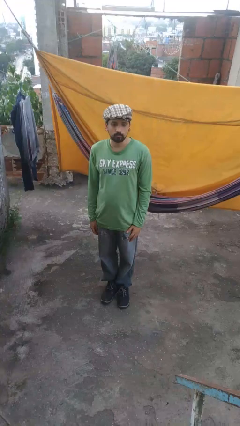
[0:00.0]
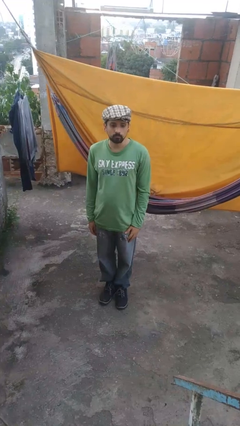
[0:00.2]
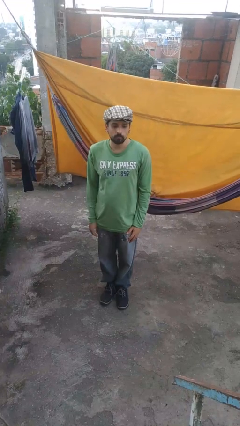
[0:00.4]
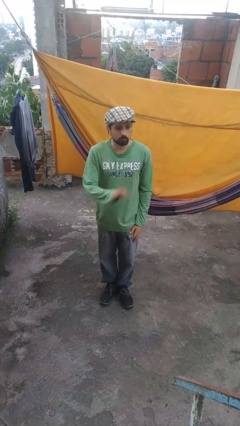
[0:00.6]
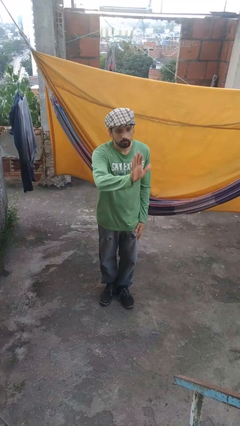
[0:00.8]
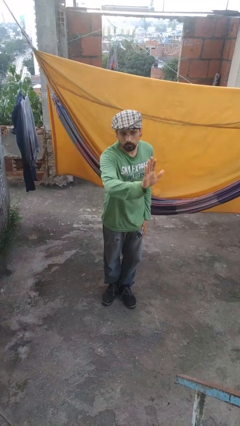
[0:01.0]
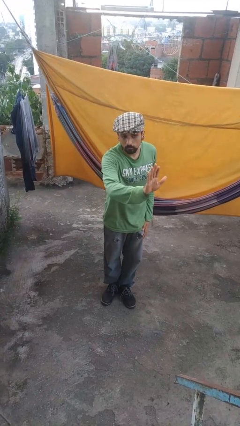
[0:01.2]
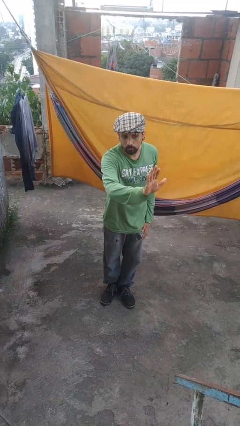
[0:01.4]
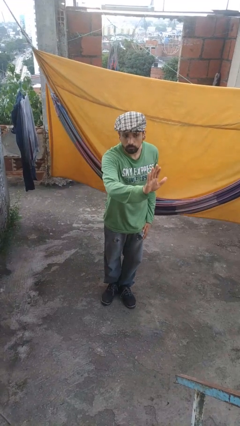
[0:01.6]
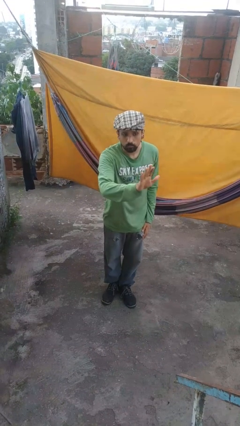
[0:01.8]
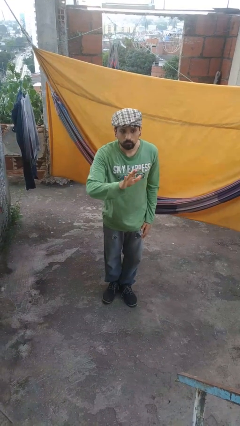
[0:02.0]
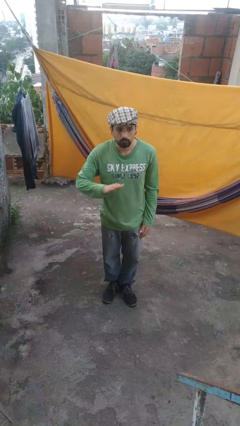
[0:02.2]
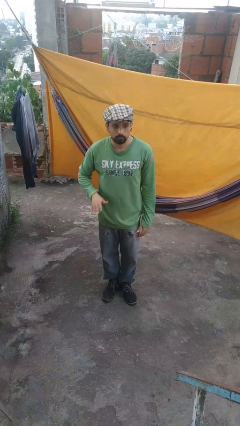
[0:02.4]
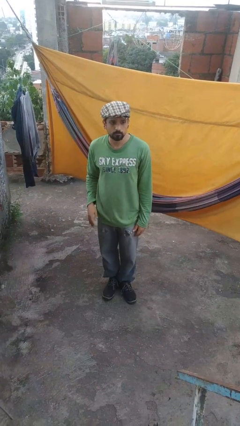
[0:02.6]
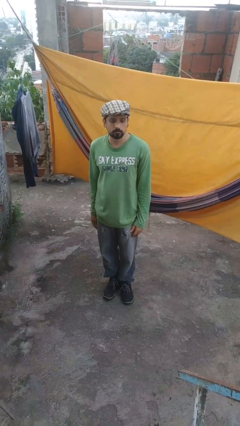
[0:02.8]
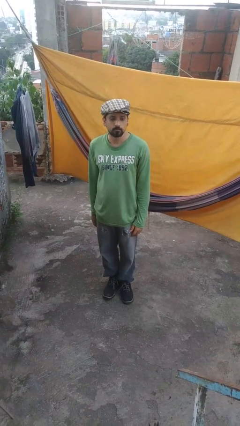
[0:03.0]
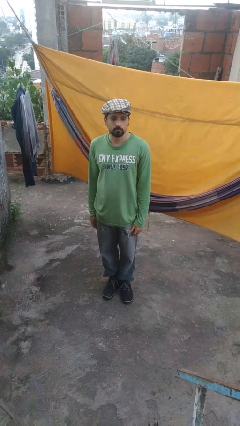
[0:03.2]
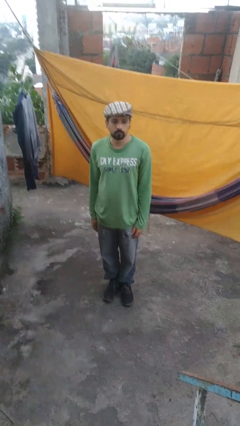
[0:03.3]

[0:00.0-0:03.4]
person gestures stop

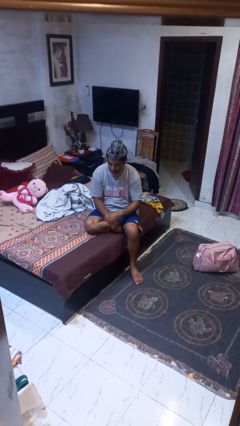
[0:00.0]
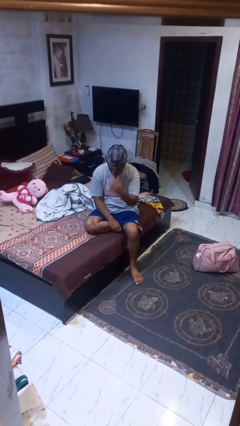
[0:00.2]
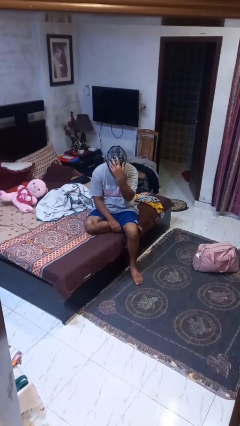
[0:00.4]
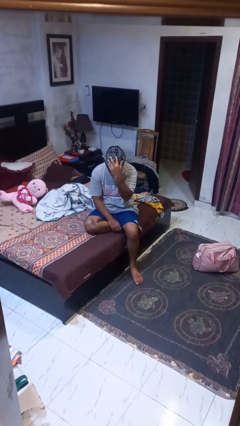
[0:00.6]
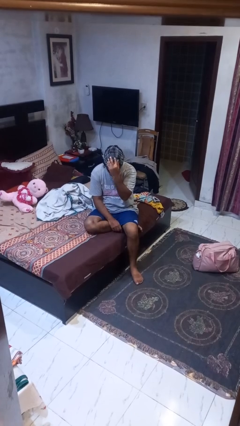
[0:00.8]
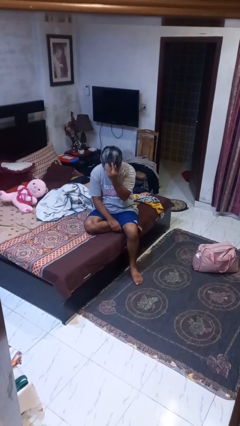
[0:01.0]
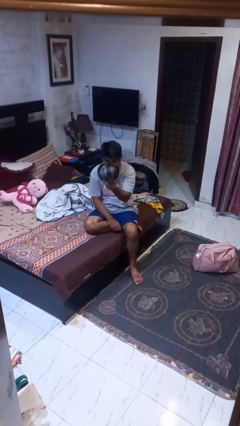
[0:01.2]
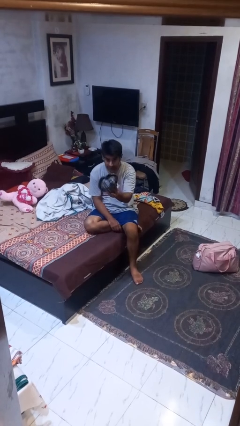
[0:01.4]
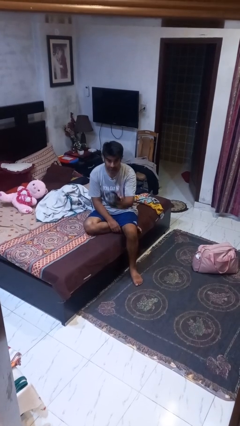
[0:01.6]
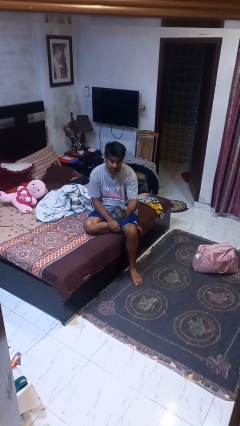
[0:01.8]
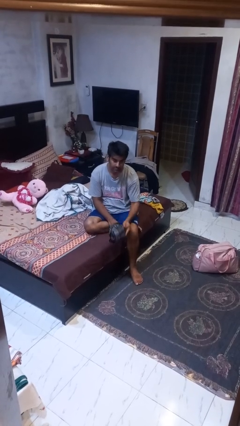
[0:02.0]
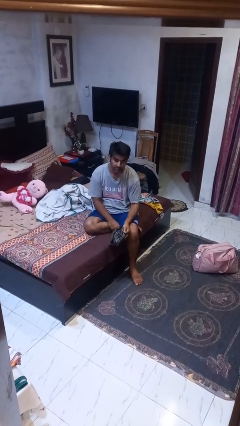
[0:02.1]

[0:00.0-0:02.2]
person takes off hat

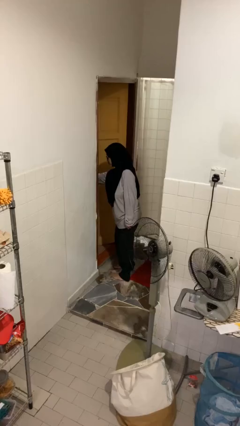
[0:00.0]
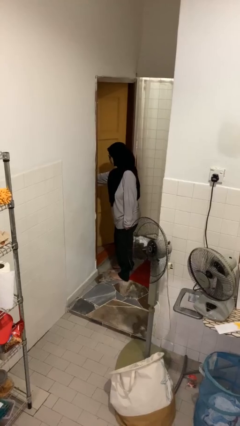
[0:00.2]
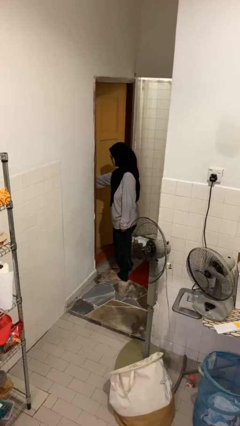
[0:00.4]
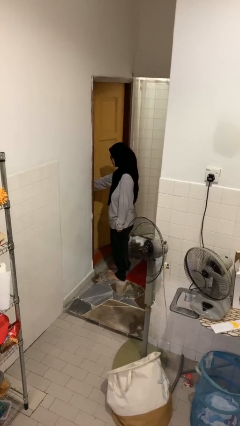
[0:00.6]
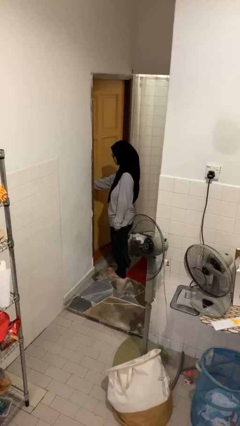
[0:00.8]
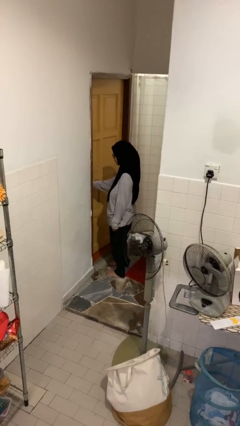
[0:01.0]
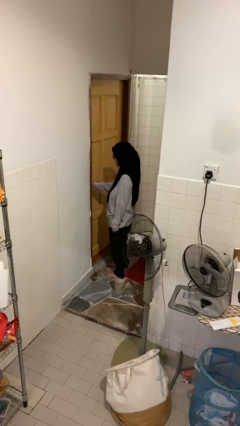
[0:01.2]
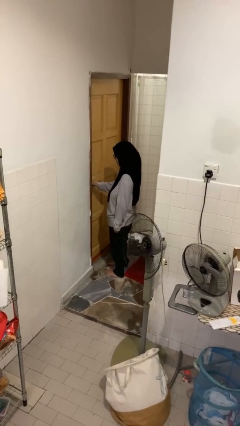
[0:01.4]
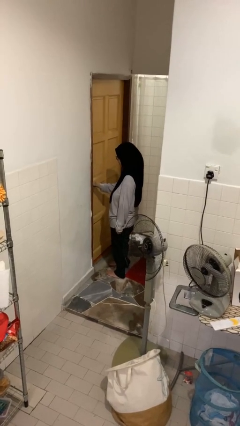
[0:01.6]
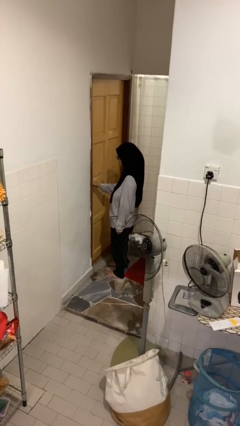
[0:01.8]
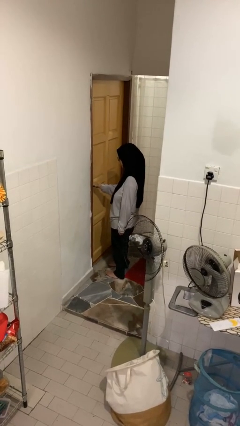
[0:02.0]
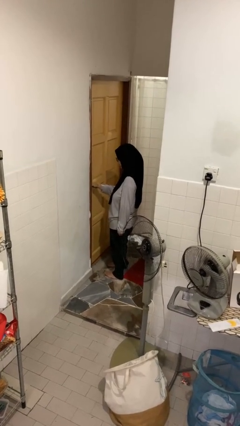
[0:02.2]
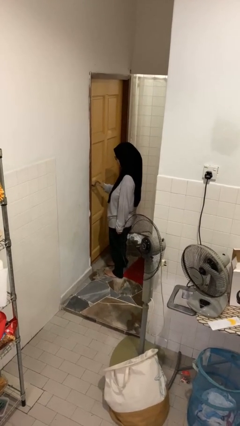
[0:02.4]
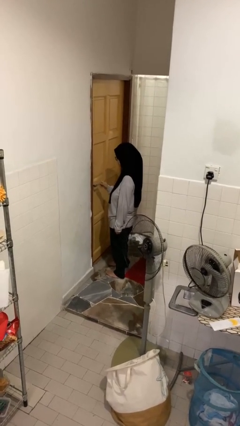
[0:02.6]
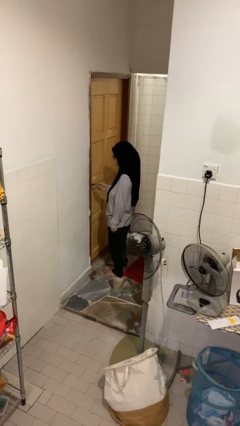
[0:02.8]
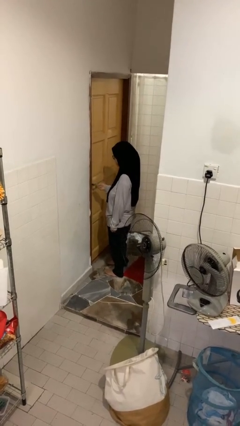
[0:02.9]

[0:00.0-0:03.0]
person closes facility door

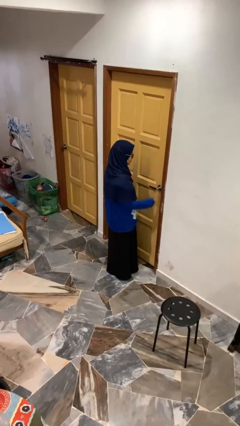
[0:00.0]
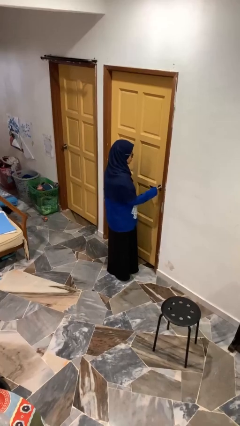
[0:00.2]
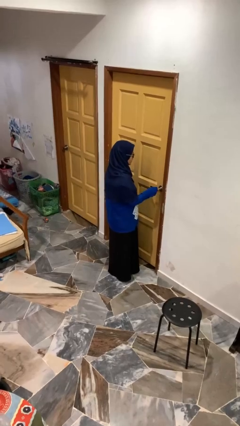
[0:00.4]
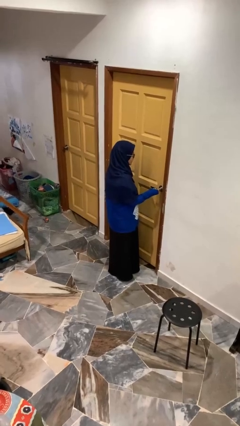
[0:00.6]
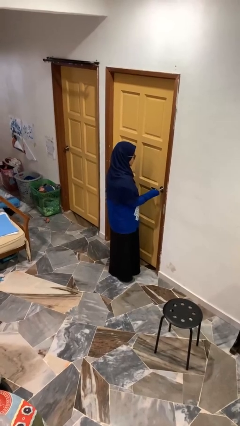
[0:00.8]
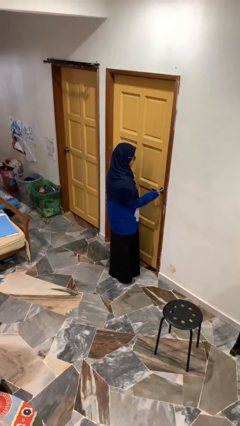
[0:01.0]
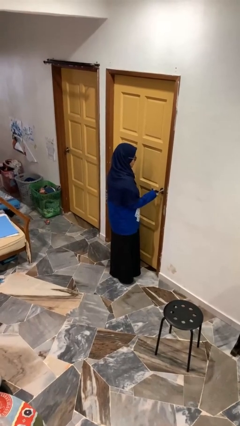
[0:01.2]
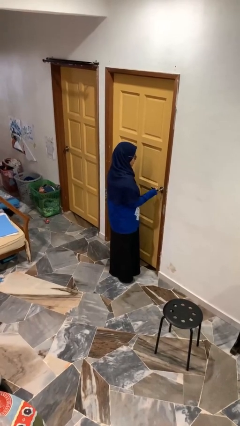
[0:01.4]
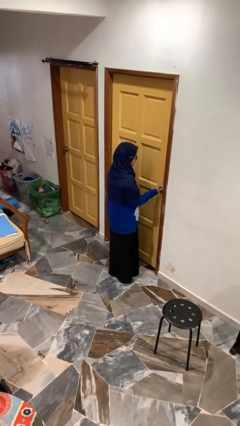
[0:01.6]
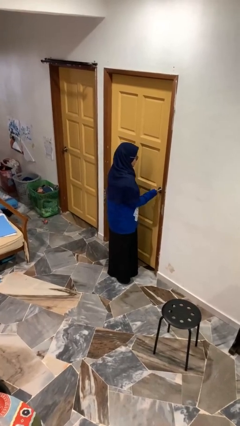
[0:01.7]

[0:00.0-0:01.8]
person unlocks door with keys

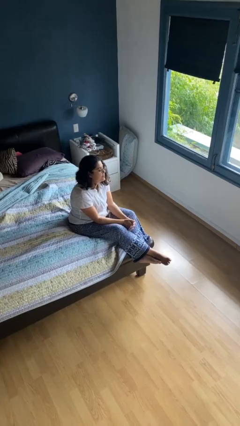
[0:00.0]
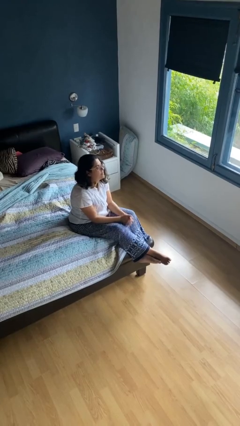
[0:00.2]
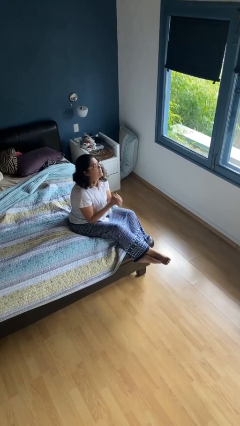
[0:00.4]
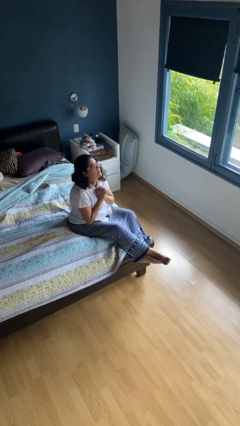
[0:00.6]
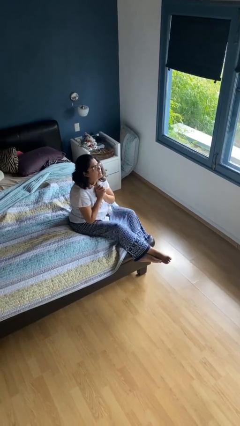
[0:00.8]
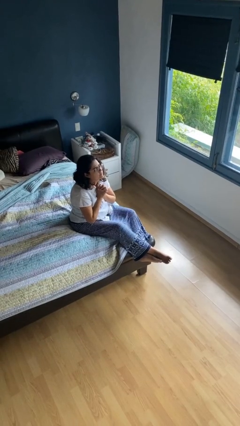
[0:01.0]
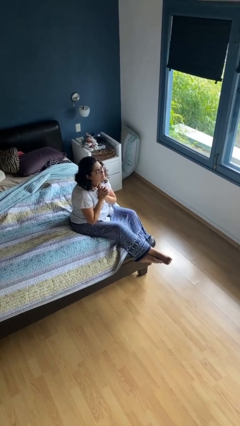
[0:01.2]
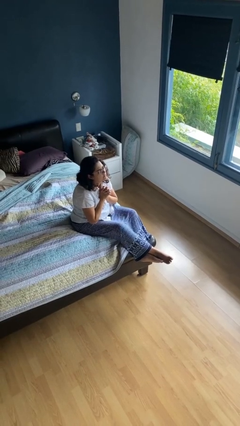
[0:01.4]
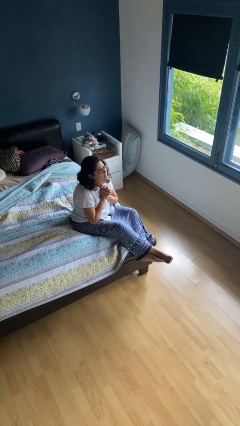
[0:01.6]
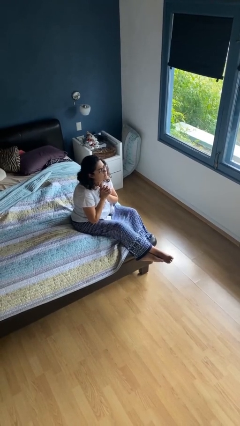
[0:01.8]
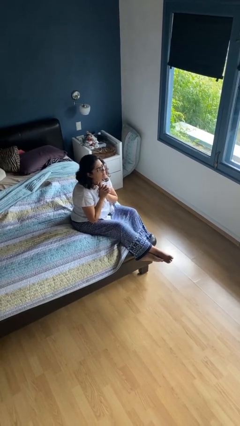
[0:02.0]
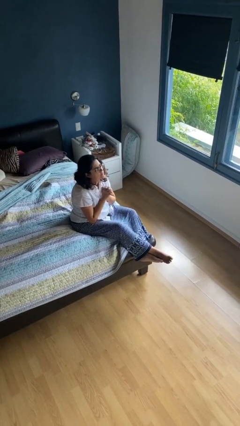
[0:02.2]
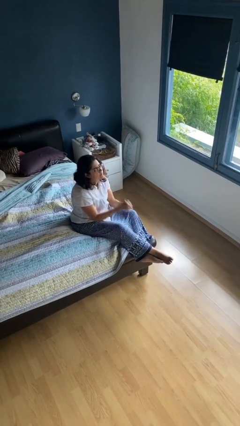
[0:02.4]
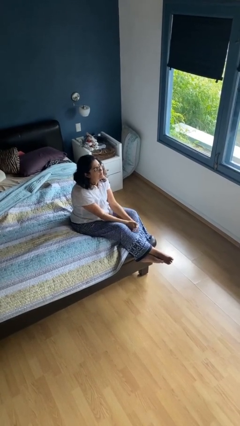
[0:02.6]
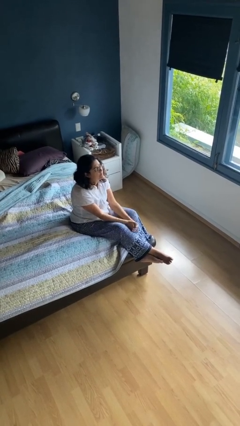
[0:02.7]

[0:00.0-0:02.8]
person prays

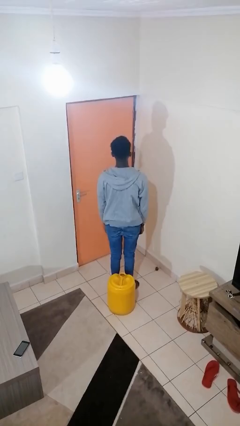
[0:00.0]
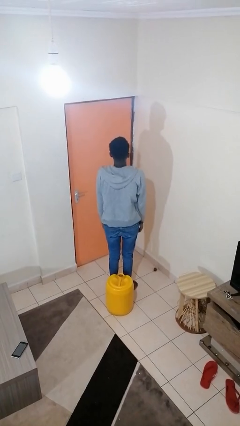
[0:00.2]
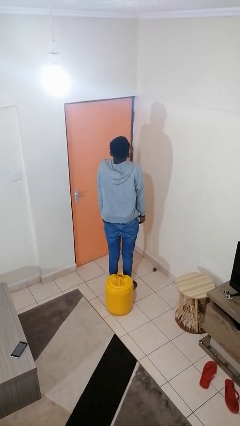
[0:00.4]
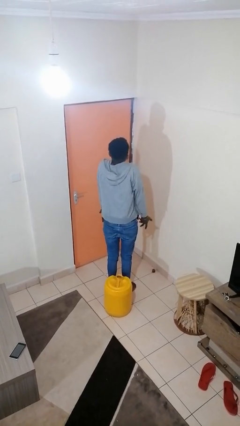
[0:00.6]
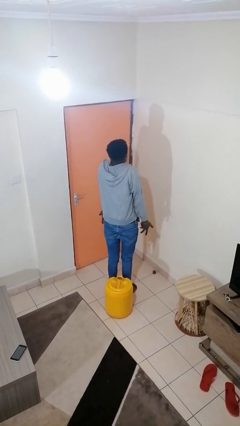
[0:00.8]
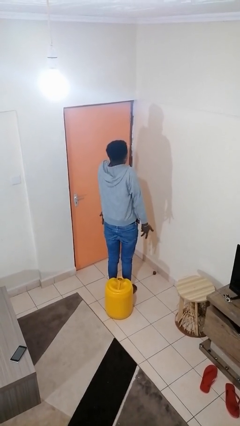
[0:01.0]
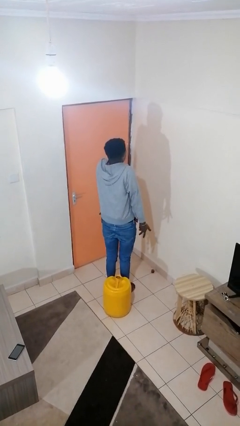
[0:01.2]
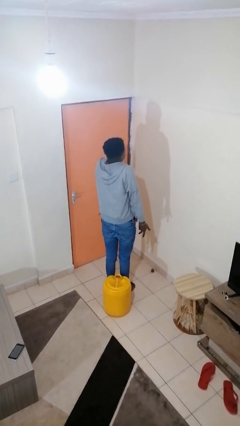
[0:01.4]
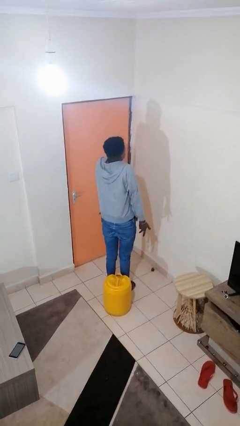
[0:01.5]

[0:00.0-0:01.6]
person shrugs

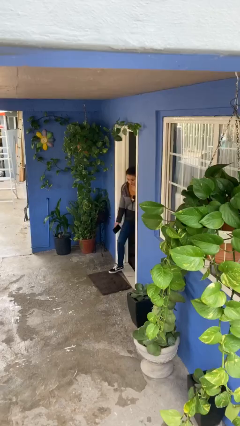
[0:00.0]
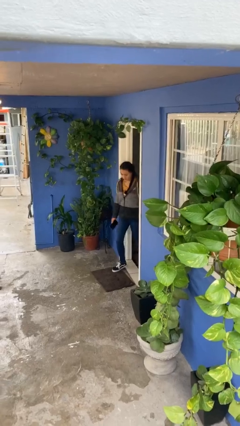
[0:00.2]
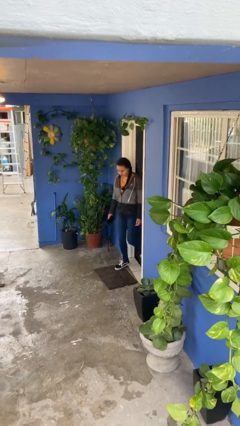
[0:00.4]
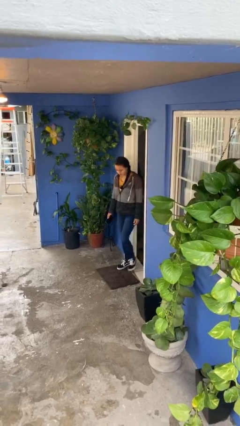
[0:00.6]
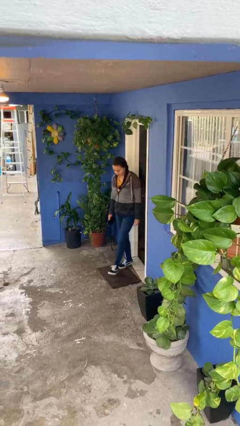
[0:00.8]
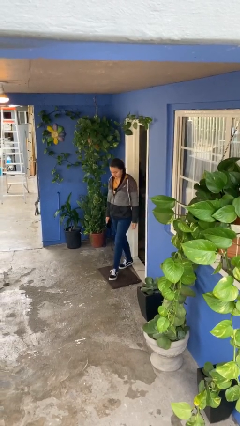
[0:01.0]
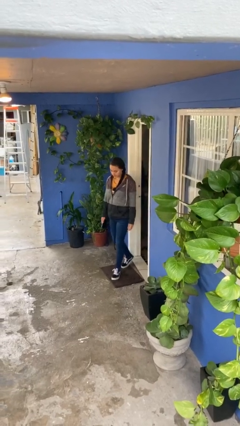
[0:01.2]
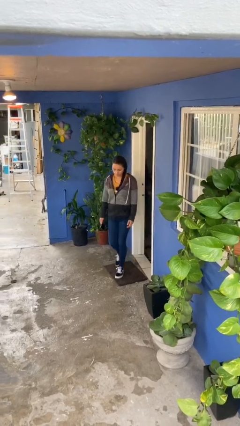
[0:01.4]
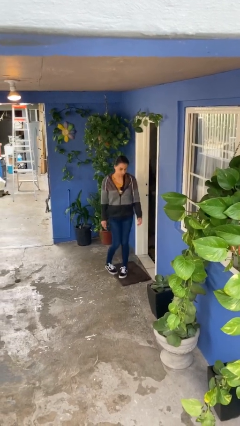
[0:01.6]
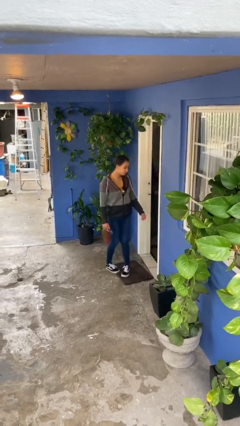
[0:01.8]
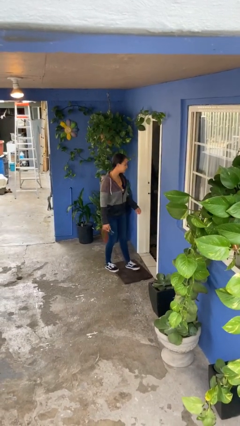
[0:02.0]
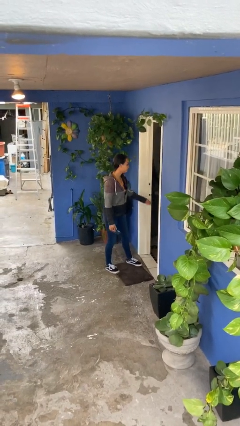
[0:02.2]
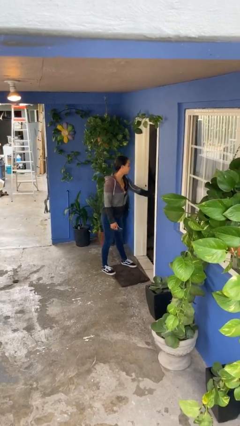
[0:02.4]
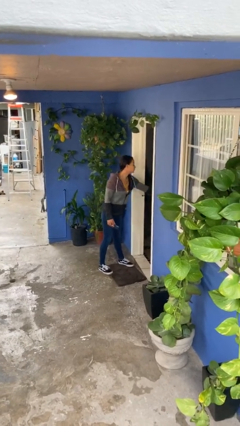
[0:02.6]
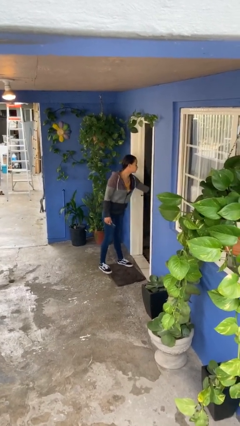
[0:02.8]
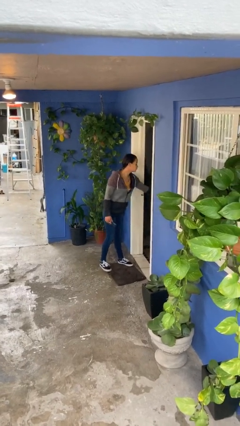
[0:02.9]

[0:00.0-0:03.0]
person enters scene through structure
